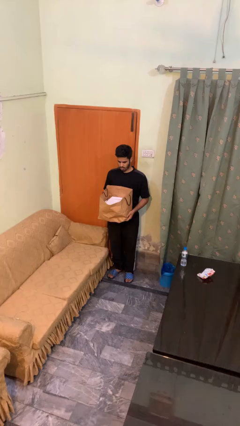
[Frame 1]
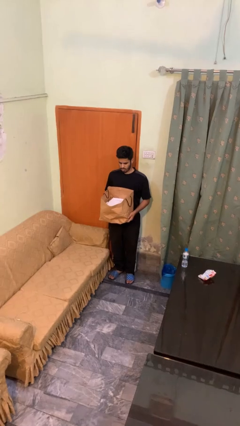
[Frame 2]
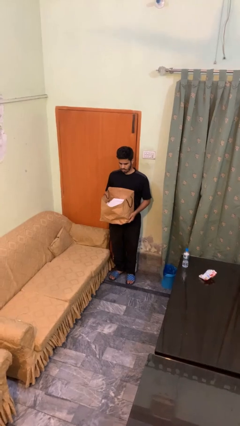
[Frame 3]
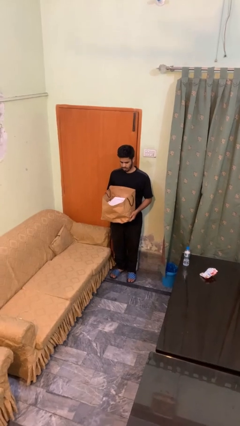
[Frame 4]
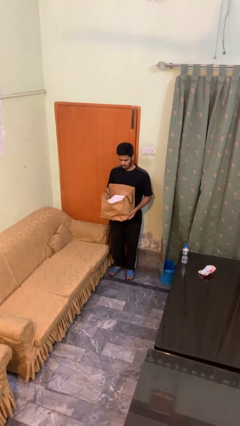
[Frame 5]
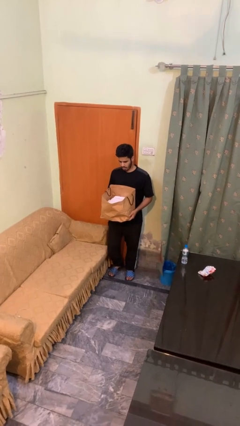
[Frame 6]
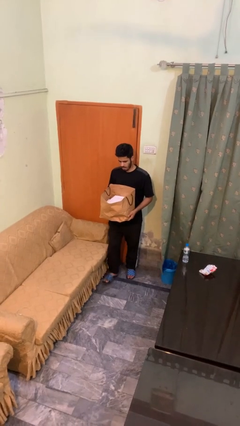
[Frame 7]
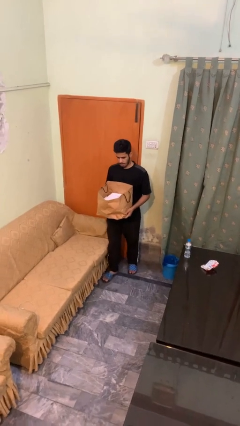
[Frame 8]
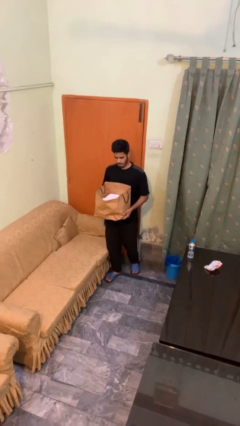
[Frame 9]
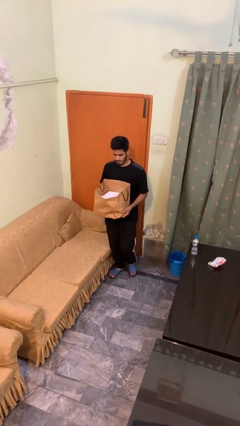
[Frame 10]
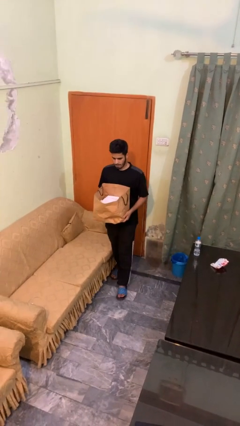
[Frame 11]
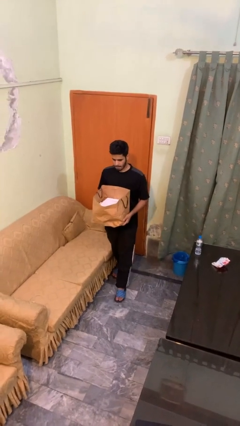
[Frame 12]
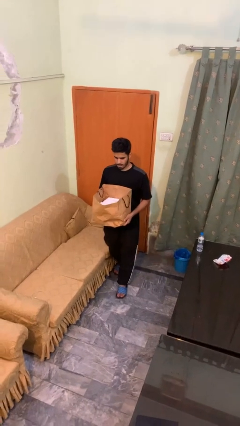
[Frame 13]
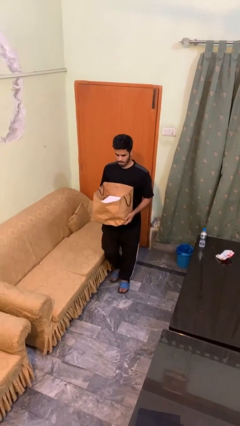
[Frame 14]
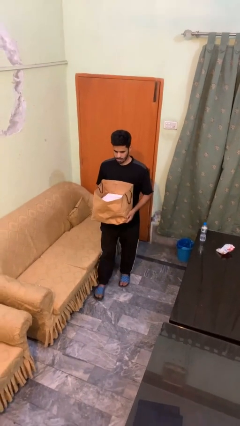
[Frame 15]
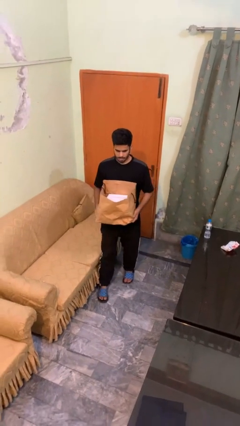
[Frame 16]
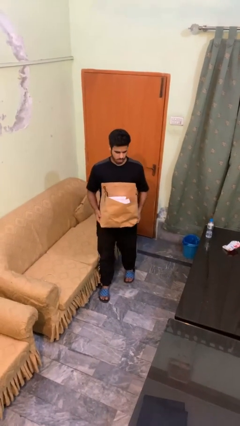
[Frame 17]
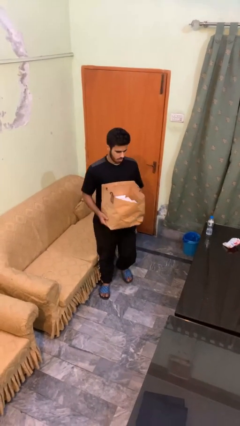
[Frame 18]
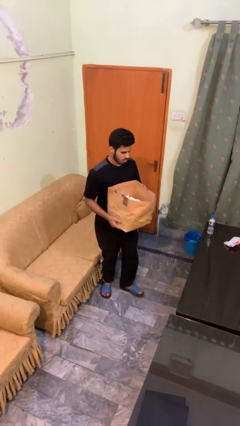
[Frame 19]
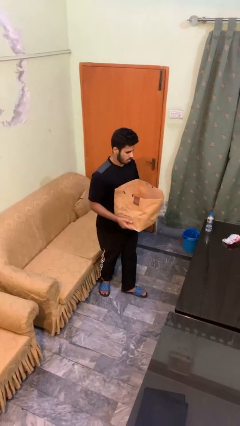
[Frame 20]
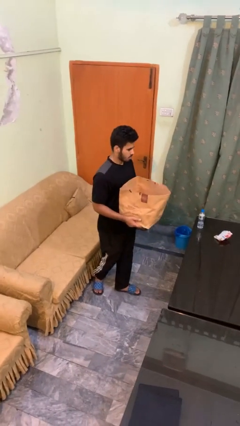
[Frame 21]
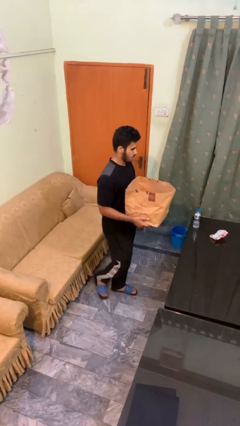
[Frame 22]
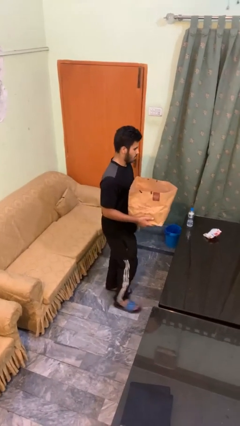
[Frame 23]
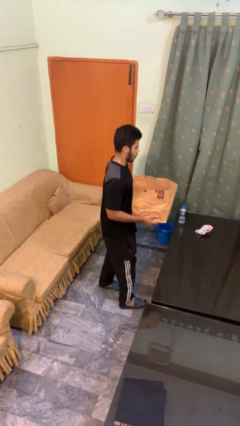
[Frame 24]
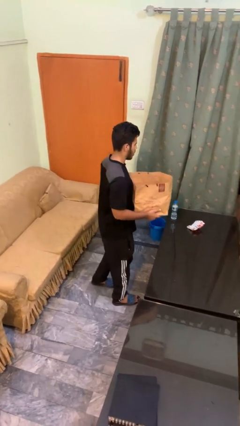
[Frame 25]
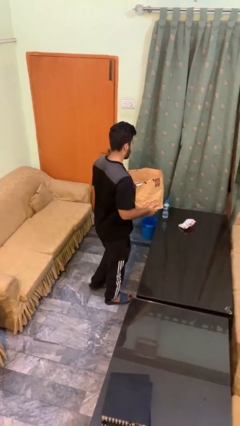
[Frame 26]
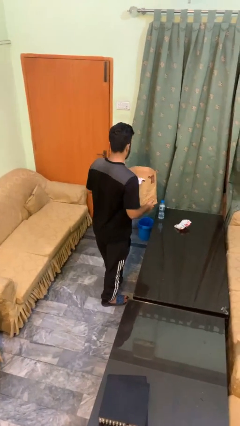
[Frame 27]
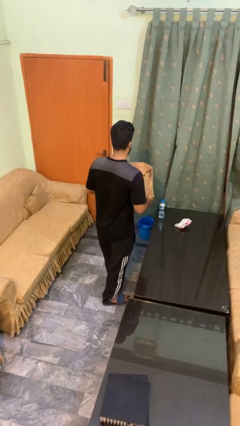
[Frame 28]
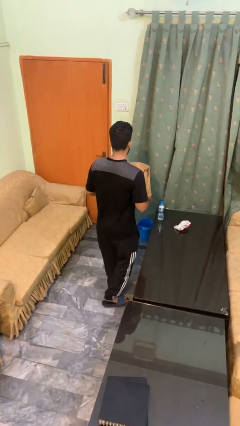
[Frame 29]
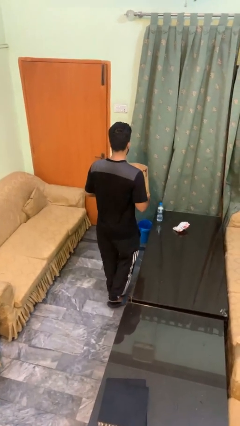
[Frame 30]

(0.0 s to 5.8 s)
person carries groceries

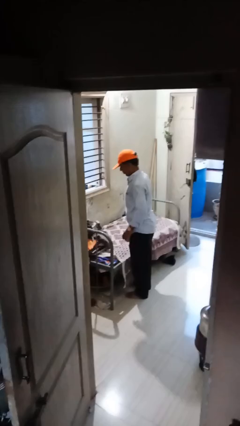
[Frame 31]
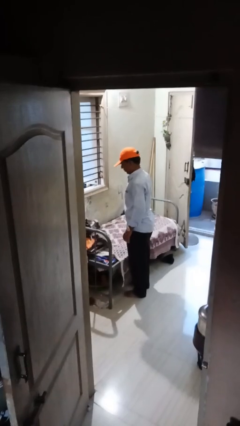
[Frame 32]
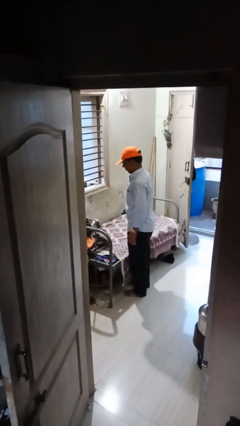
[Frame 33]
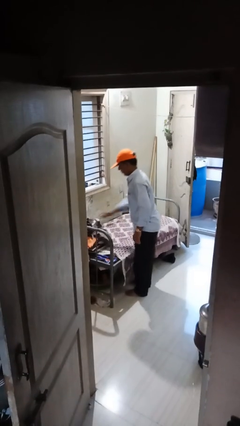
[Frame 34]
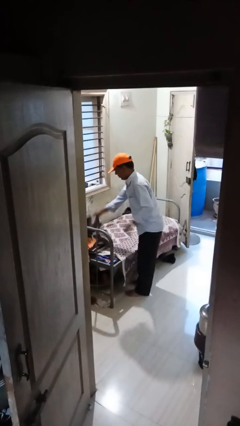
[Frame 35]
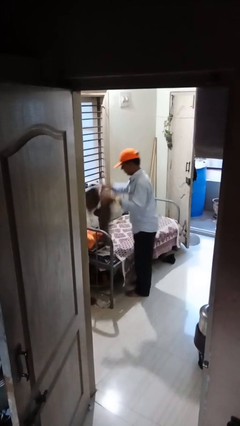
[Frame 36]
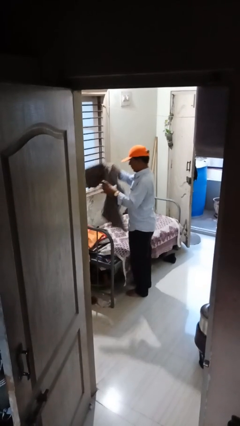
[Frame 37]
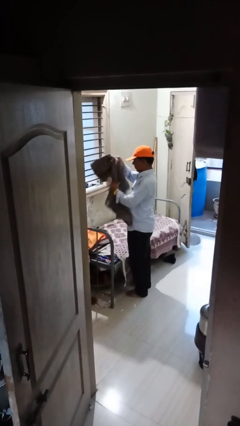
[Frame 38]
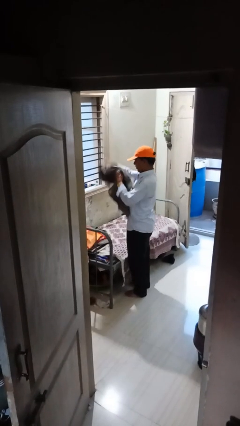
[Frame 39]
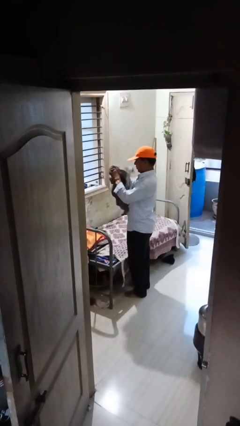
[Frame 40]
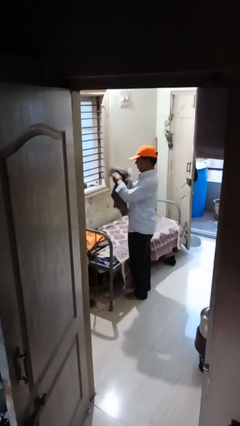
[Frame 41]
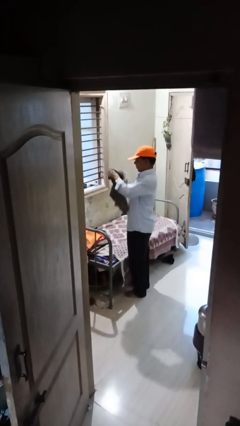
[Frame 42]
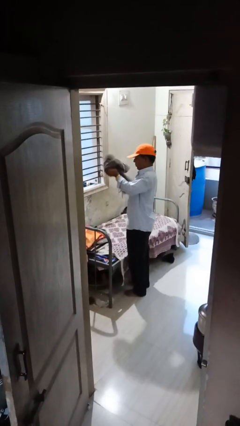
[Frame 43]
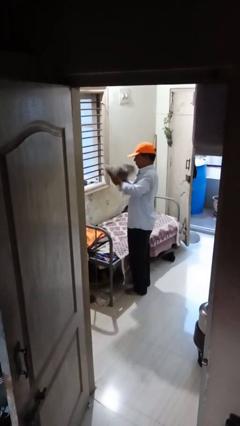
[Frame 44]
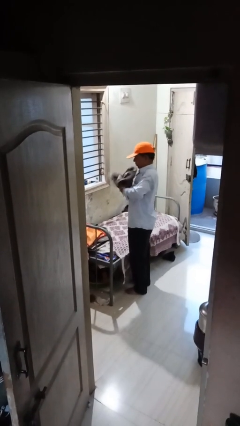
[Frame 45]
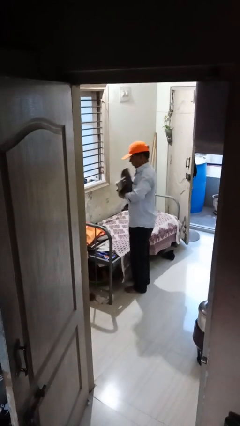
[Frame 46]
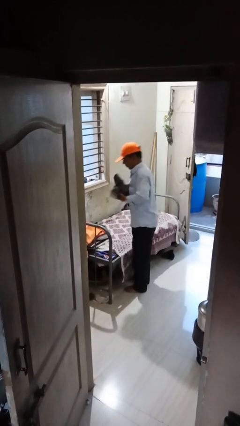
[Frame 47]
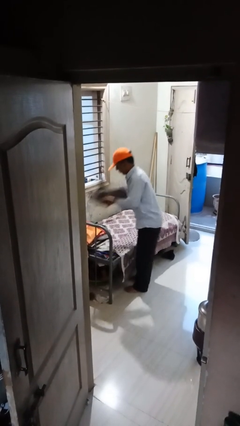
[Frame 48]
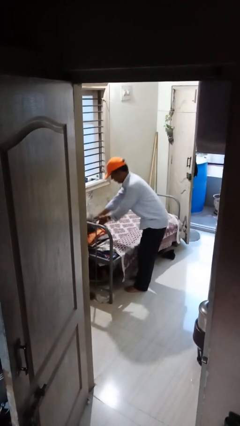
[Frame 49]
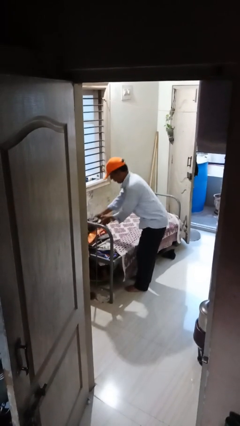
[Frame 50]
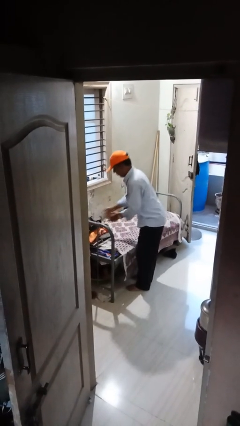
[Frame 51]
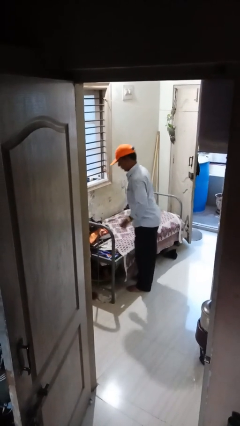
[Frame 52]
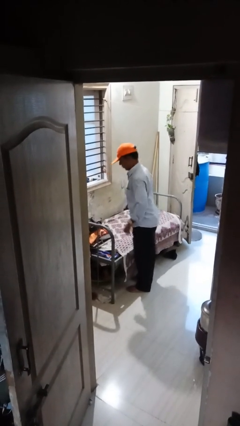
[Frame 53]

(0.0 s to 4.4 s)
person folds pants

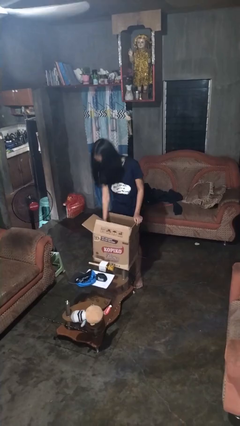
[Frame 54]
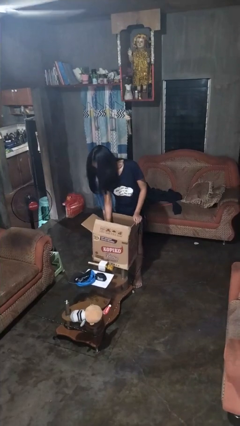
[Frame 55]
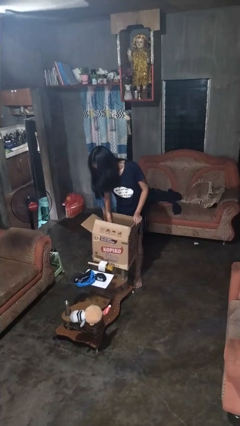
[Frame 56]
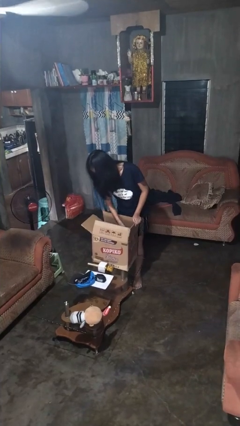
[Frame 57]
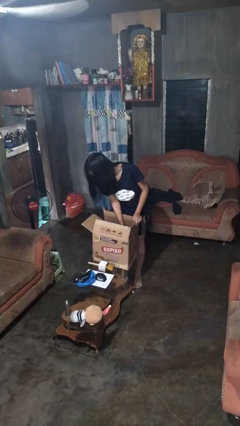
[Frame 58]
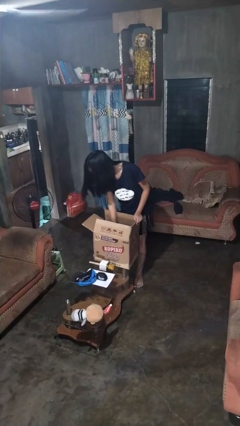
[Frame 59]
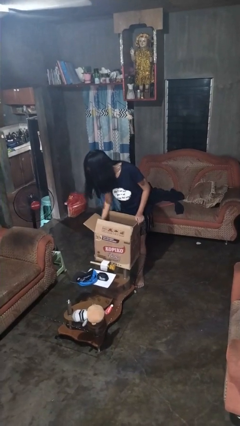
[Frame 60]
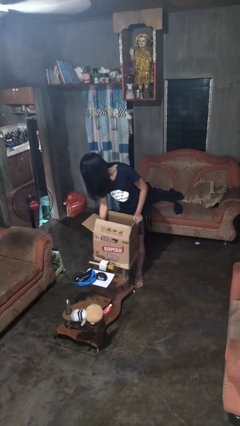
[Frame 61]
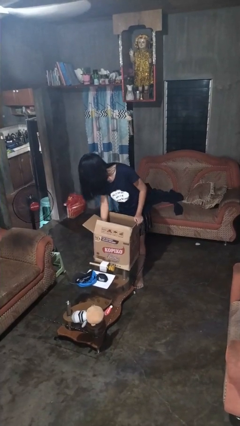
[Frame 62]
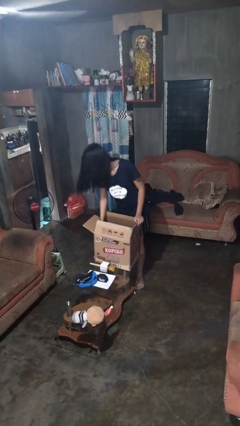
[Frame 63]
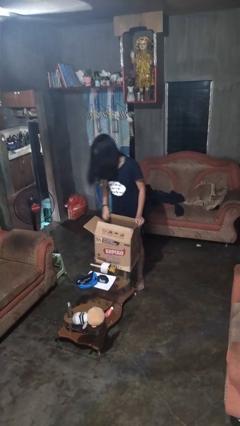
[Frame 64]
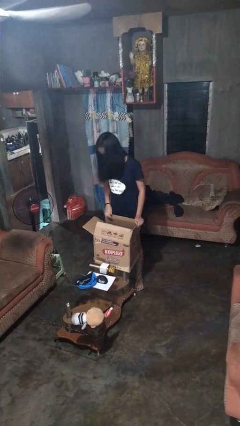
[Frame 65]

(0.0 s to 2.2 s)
person searches in box

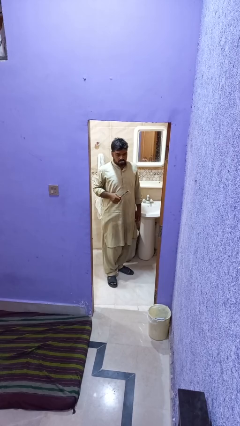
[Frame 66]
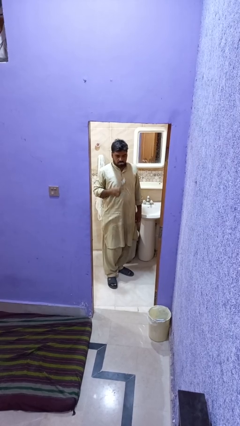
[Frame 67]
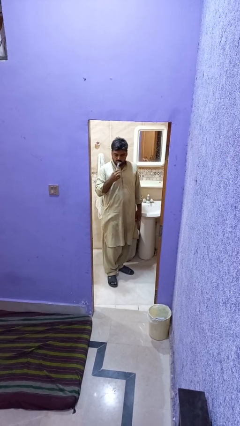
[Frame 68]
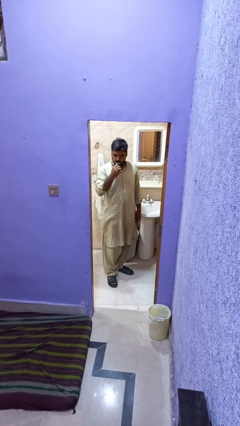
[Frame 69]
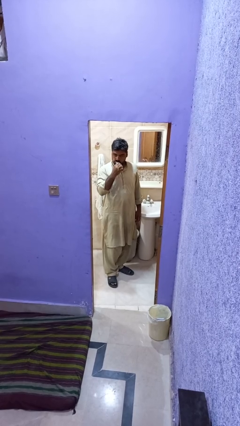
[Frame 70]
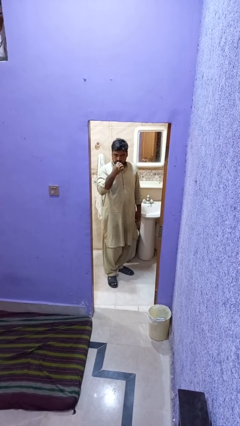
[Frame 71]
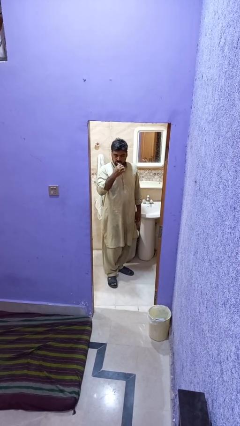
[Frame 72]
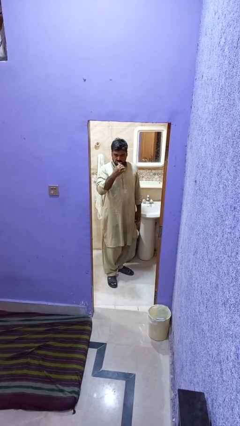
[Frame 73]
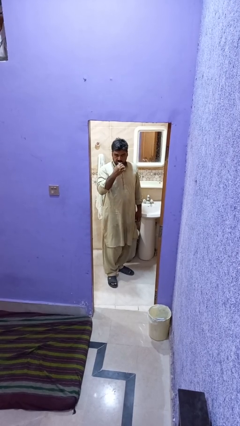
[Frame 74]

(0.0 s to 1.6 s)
person brushes teeth

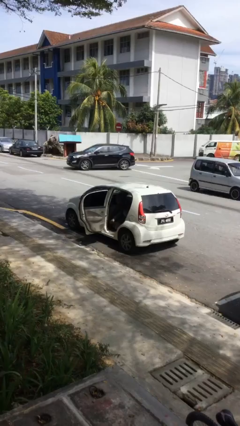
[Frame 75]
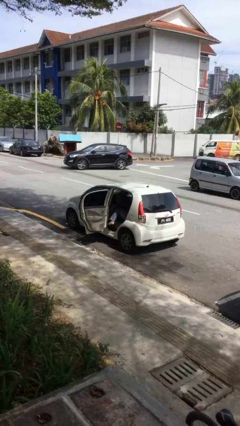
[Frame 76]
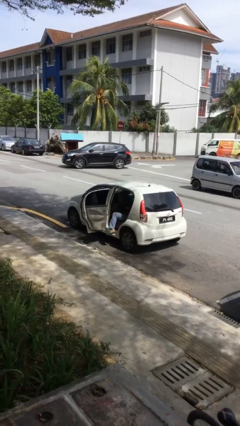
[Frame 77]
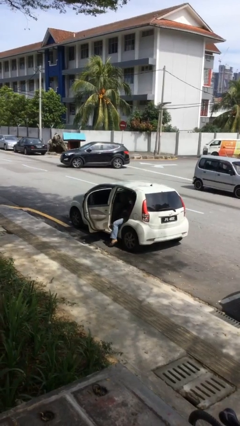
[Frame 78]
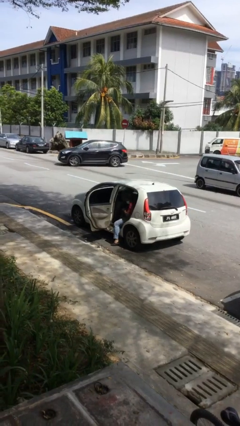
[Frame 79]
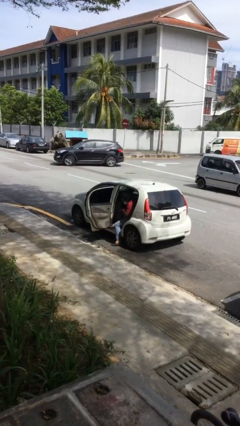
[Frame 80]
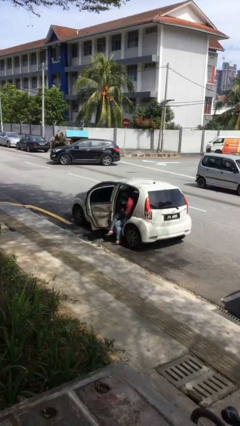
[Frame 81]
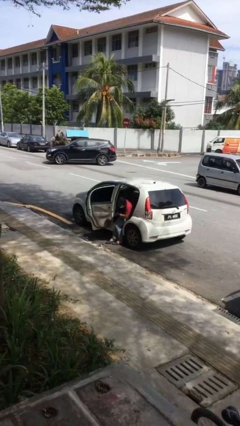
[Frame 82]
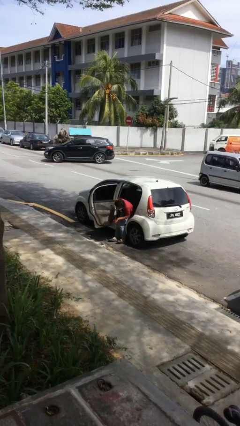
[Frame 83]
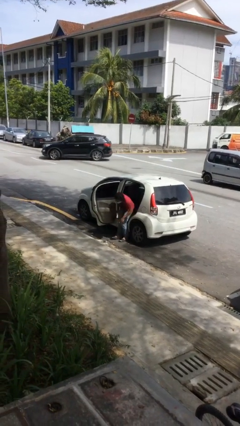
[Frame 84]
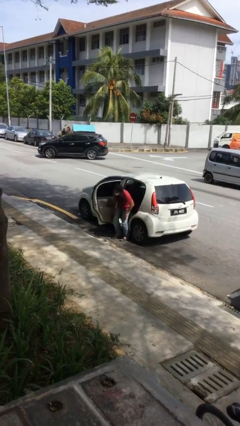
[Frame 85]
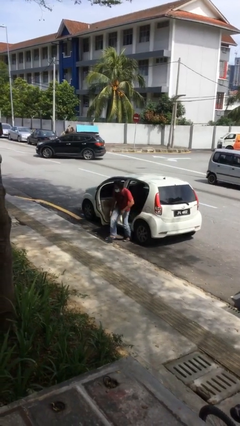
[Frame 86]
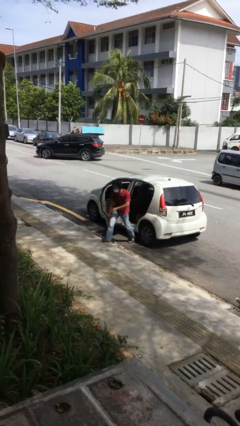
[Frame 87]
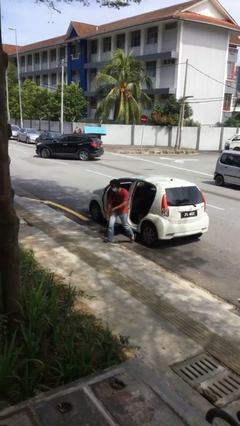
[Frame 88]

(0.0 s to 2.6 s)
person exits car

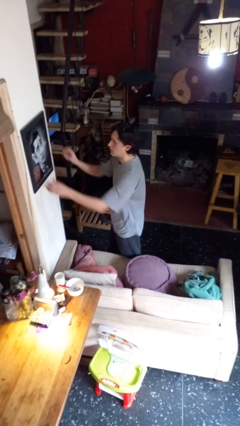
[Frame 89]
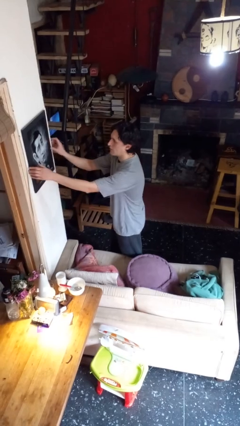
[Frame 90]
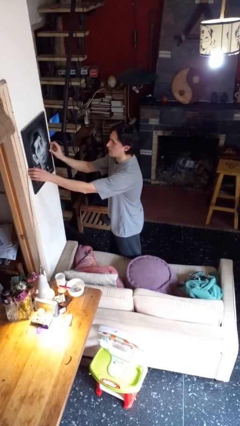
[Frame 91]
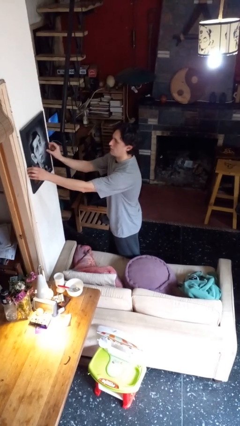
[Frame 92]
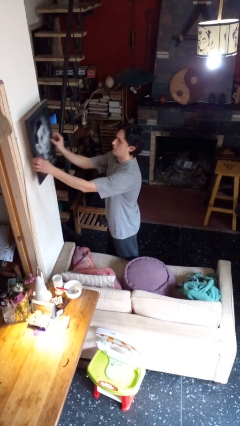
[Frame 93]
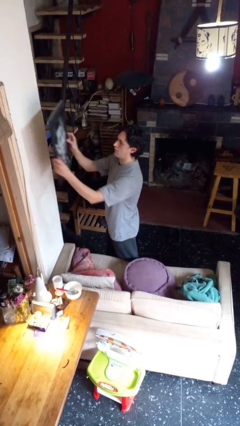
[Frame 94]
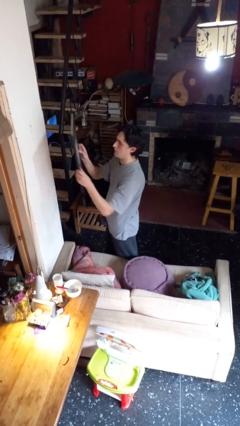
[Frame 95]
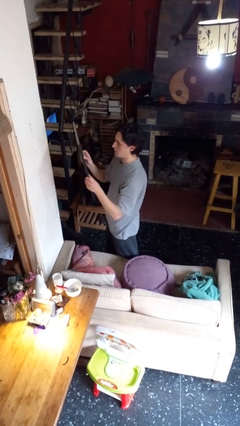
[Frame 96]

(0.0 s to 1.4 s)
person takes down picture frame
